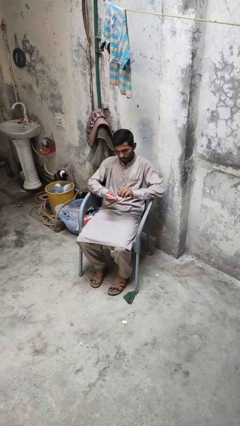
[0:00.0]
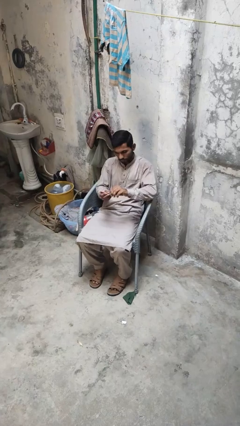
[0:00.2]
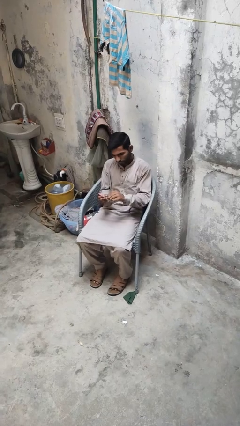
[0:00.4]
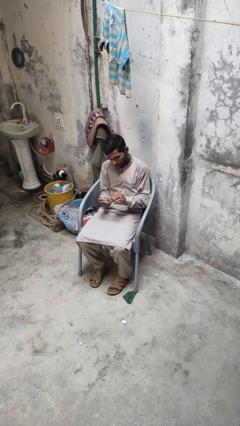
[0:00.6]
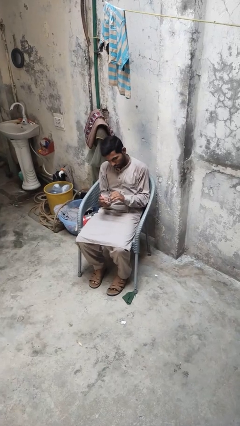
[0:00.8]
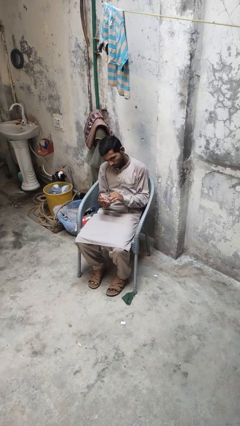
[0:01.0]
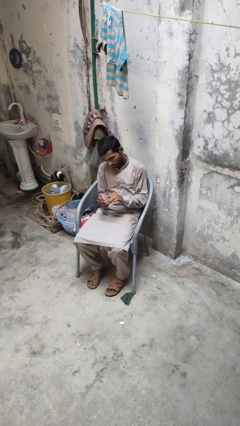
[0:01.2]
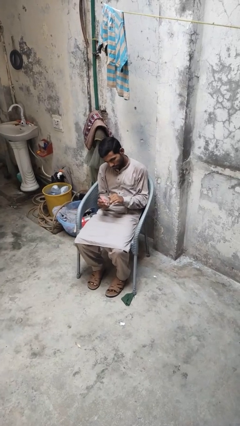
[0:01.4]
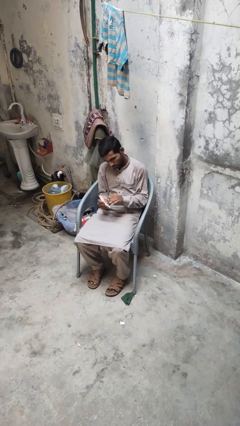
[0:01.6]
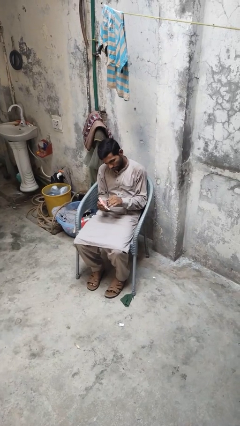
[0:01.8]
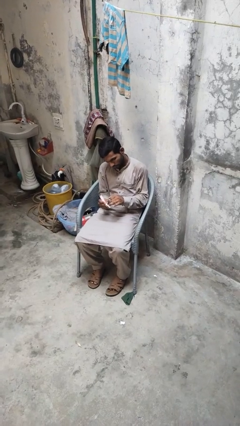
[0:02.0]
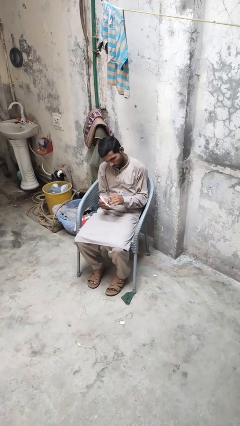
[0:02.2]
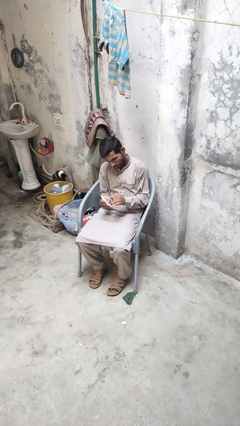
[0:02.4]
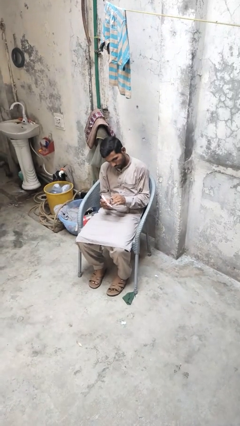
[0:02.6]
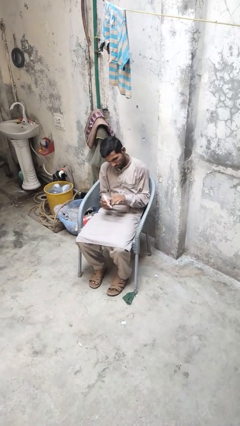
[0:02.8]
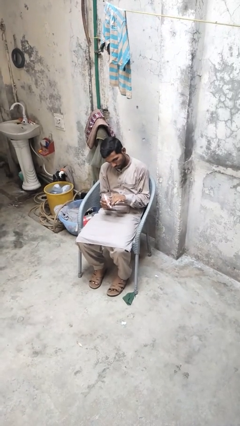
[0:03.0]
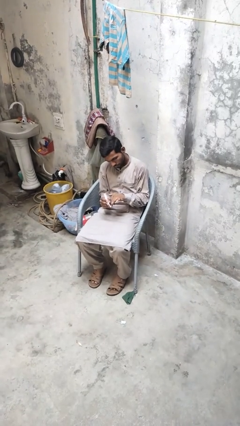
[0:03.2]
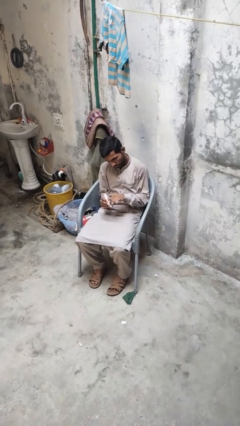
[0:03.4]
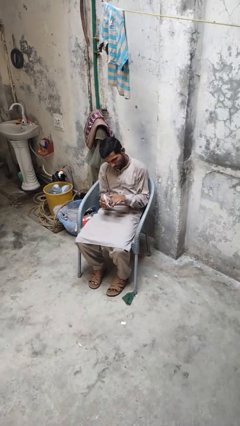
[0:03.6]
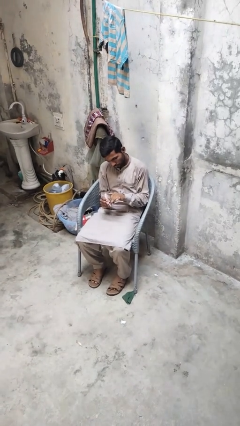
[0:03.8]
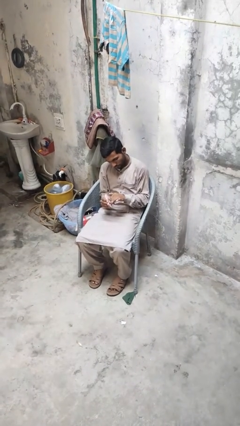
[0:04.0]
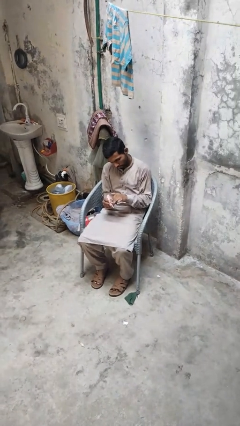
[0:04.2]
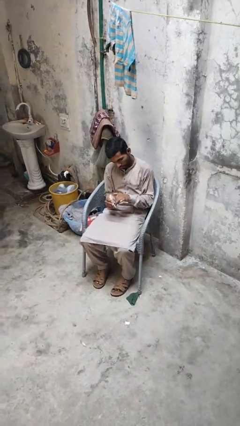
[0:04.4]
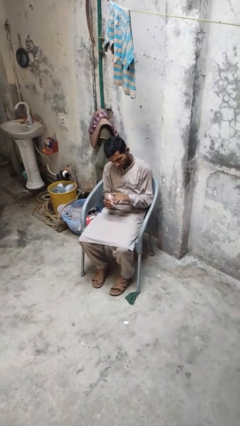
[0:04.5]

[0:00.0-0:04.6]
person files fingernails

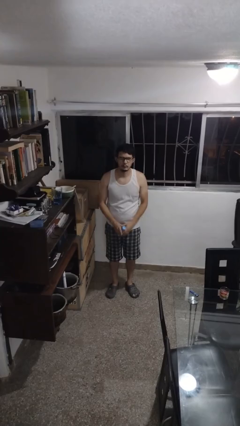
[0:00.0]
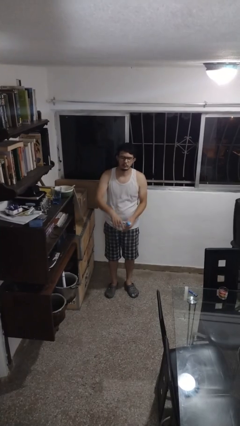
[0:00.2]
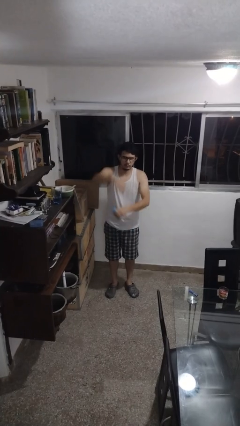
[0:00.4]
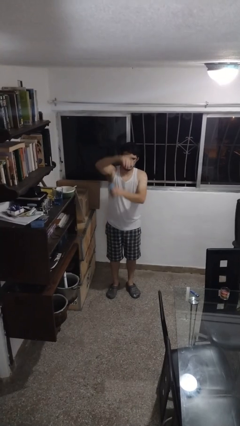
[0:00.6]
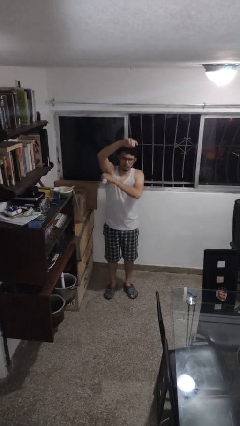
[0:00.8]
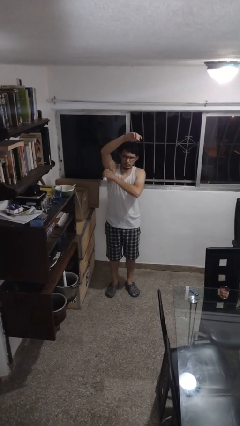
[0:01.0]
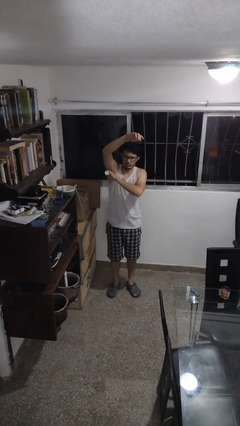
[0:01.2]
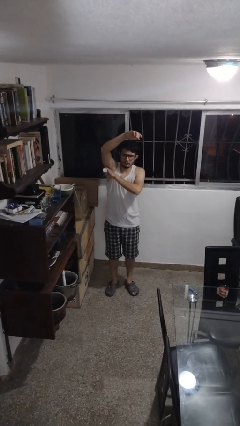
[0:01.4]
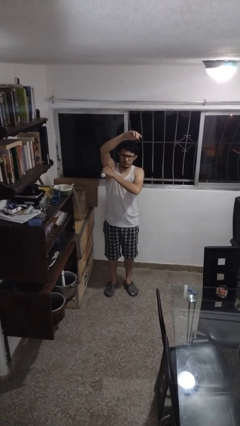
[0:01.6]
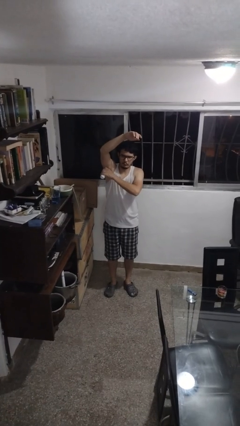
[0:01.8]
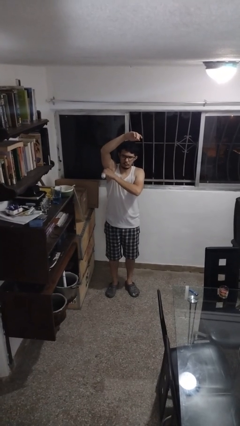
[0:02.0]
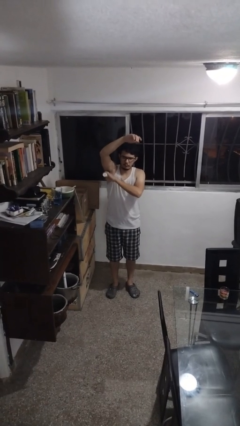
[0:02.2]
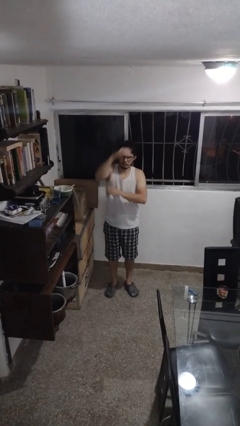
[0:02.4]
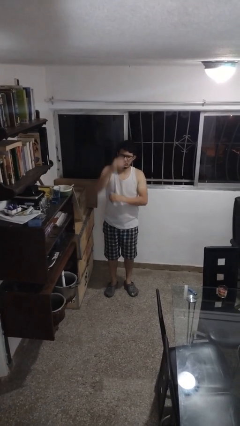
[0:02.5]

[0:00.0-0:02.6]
person applies deodorant

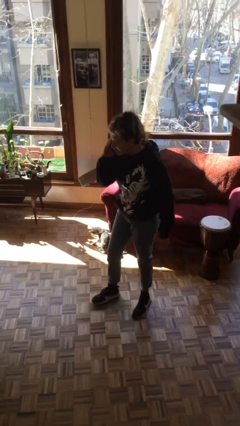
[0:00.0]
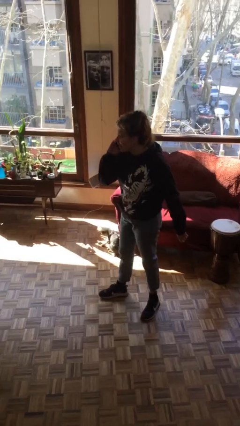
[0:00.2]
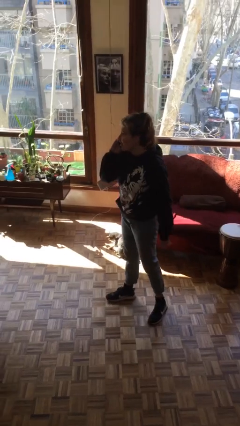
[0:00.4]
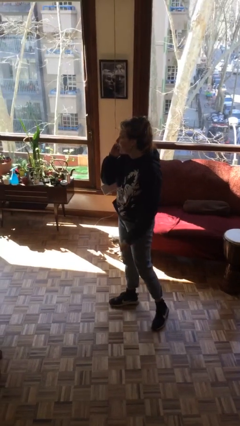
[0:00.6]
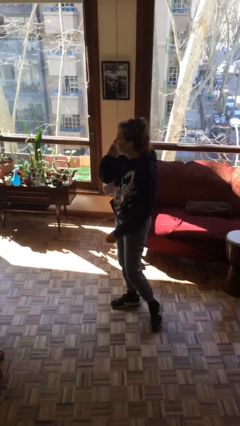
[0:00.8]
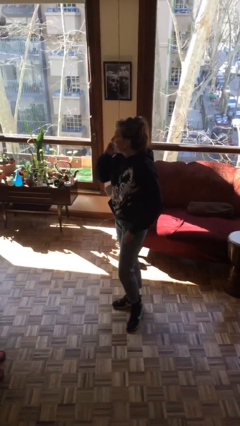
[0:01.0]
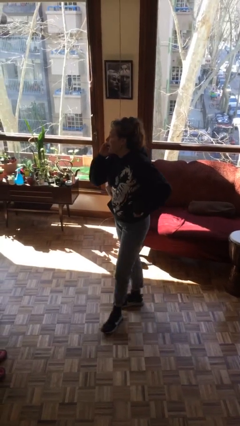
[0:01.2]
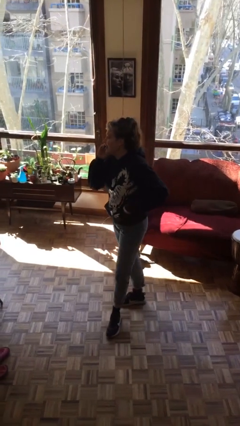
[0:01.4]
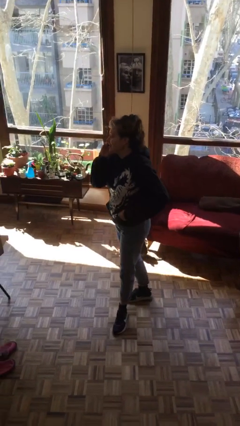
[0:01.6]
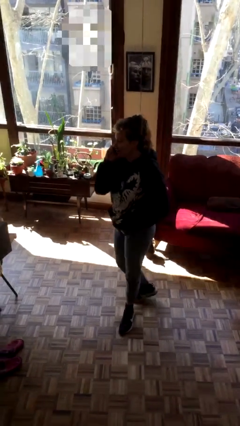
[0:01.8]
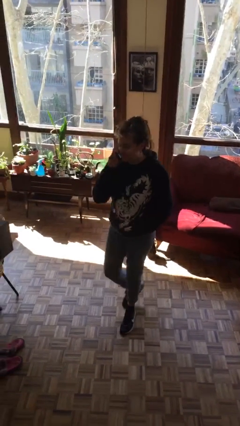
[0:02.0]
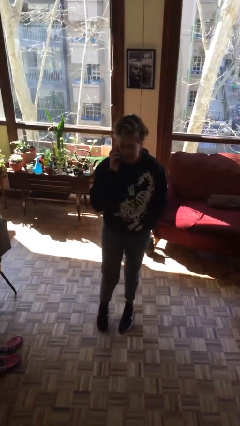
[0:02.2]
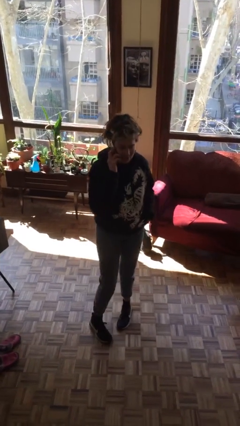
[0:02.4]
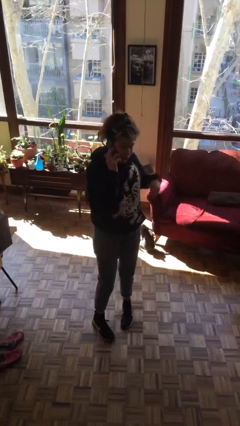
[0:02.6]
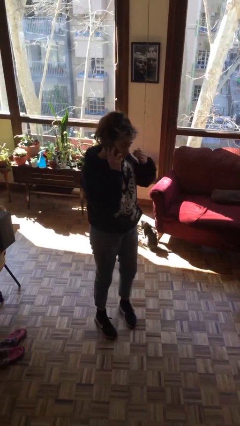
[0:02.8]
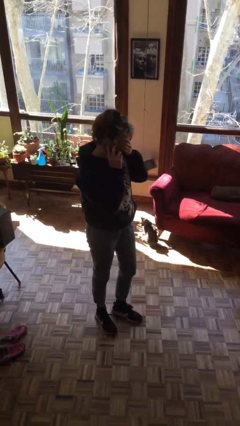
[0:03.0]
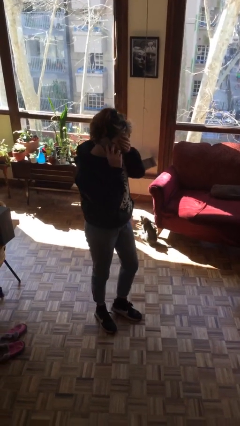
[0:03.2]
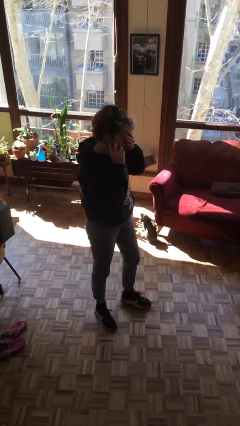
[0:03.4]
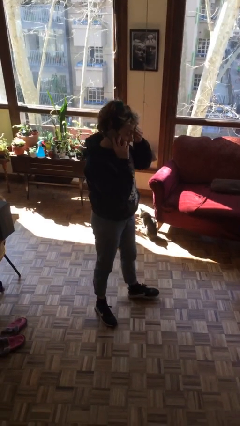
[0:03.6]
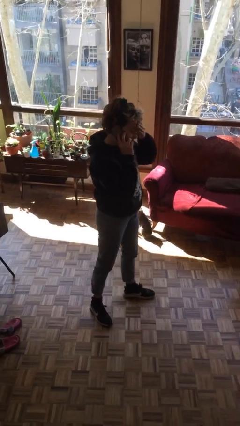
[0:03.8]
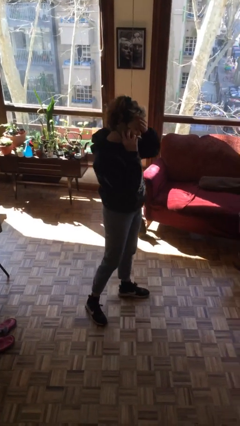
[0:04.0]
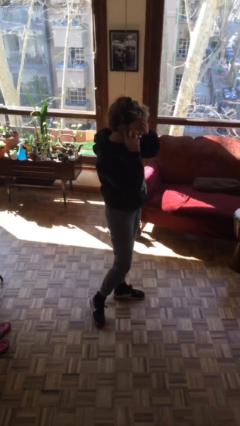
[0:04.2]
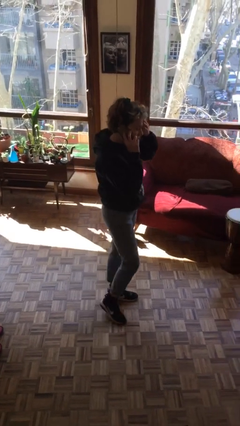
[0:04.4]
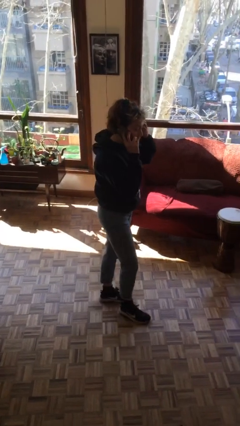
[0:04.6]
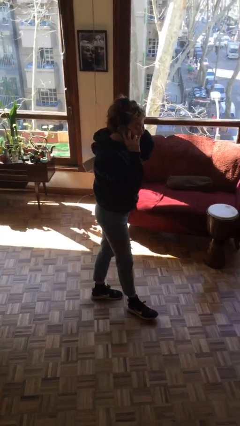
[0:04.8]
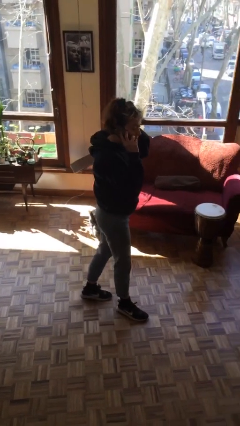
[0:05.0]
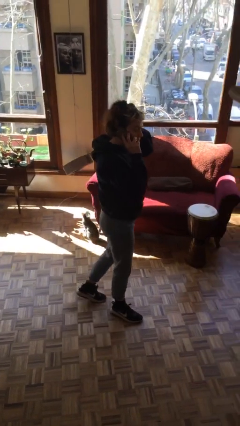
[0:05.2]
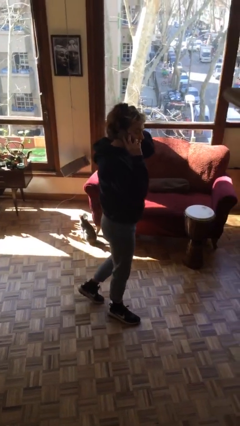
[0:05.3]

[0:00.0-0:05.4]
person talks on phone

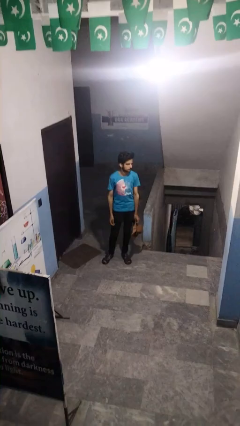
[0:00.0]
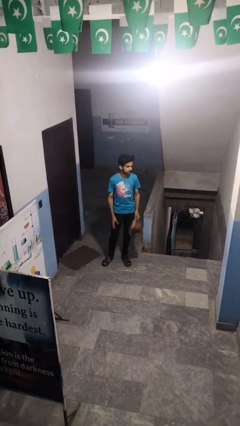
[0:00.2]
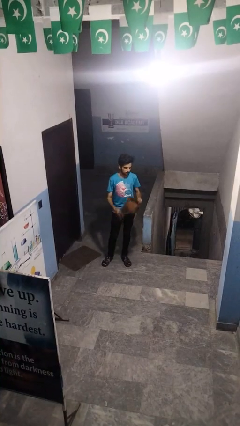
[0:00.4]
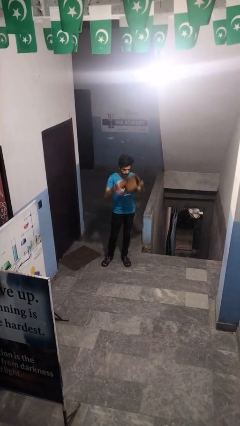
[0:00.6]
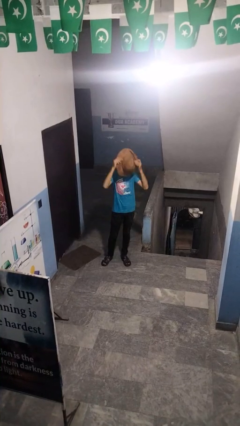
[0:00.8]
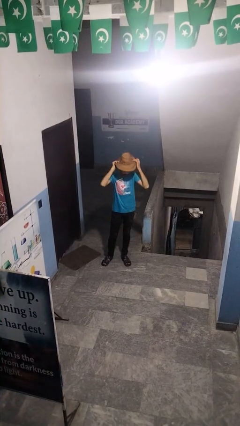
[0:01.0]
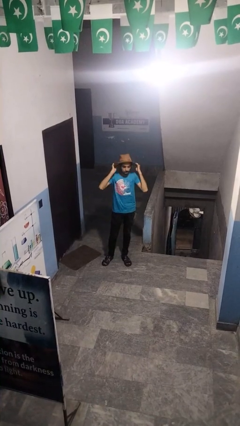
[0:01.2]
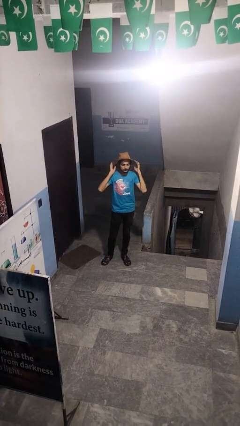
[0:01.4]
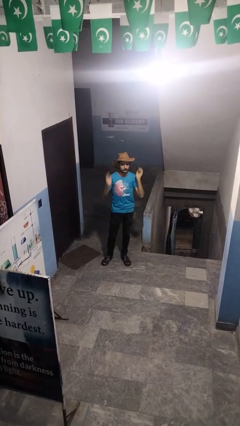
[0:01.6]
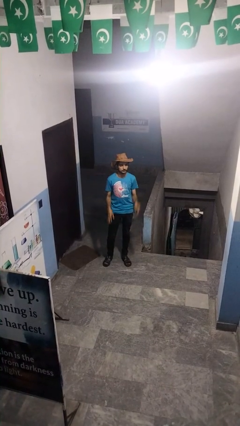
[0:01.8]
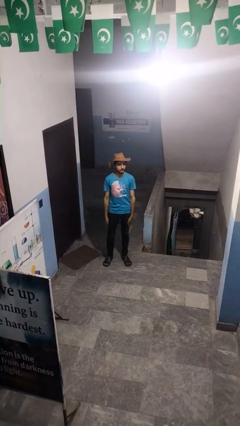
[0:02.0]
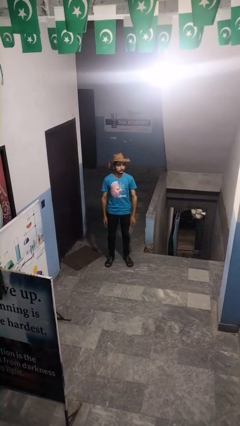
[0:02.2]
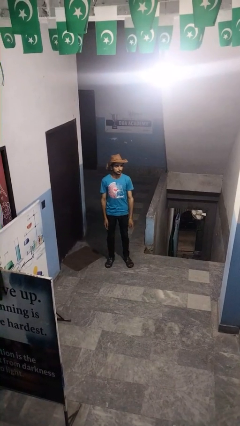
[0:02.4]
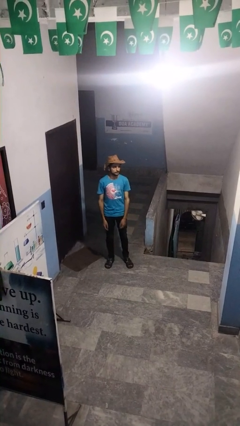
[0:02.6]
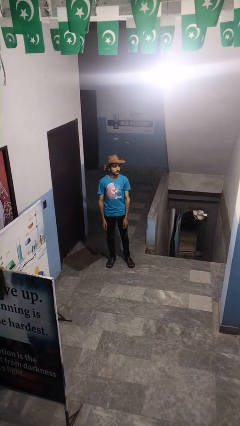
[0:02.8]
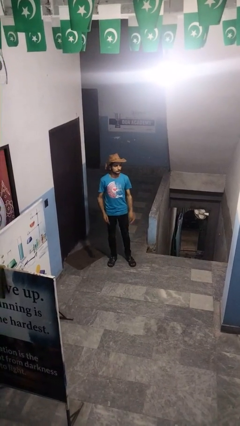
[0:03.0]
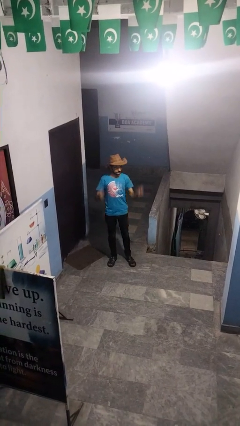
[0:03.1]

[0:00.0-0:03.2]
person puts on hat

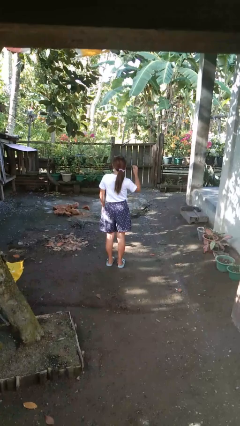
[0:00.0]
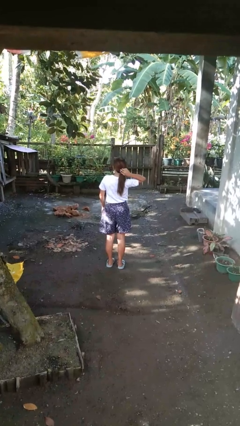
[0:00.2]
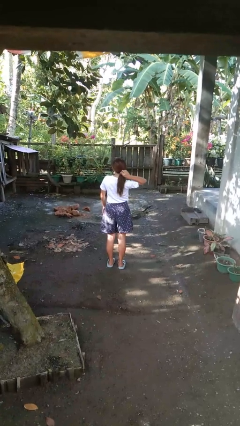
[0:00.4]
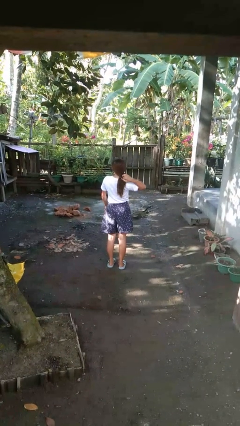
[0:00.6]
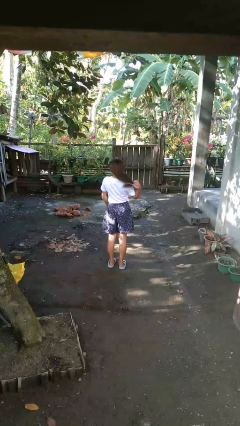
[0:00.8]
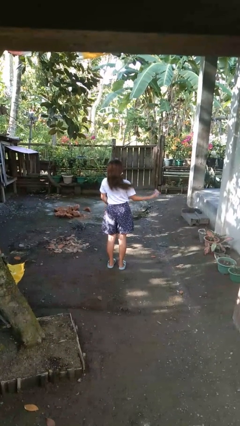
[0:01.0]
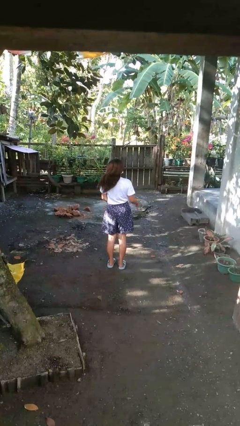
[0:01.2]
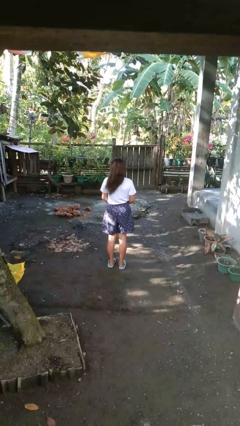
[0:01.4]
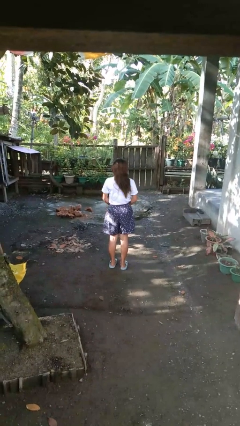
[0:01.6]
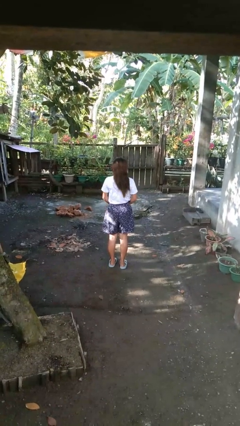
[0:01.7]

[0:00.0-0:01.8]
person takes off hairtie
